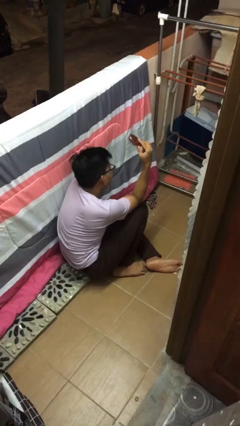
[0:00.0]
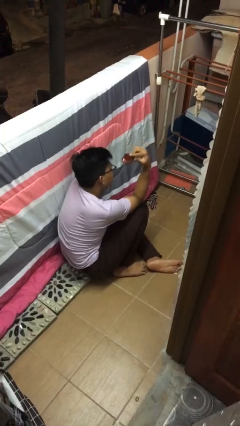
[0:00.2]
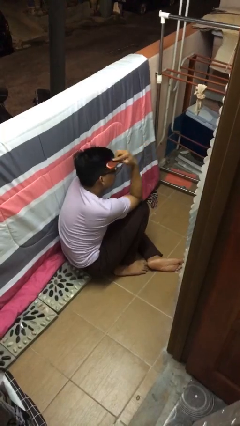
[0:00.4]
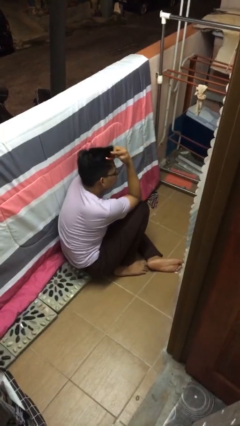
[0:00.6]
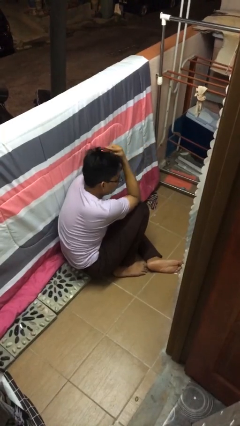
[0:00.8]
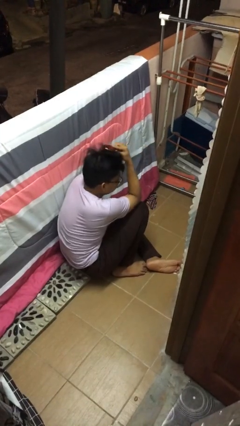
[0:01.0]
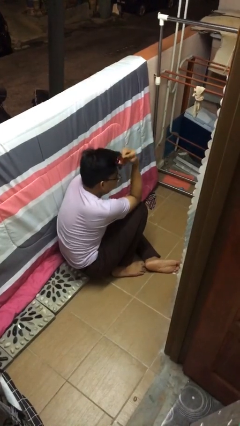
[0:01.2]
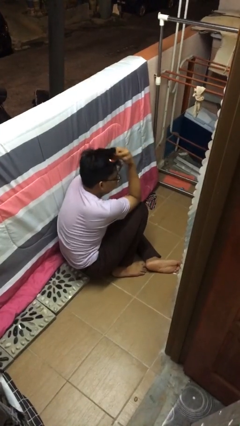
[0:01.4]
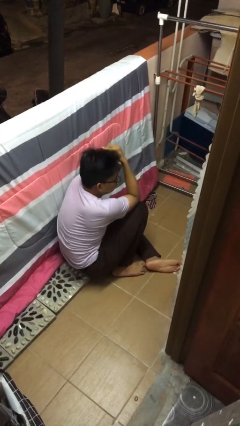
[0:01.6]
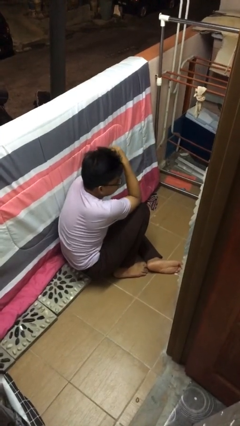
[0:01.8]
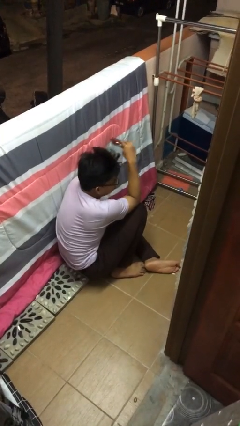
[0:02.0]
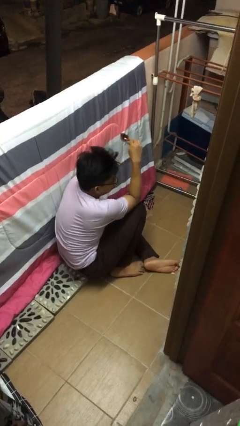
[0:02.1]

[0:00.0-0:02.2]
person brushes hair

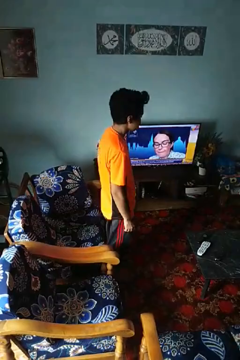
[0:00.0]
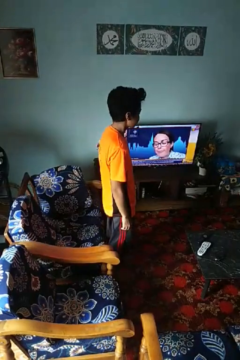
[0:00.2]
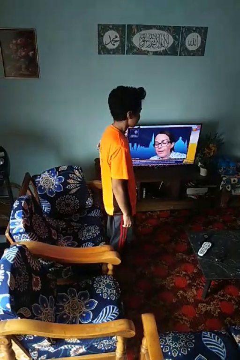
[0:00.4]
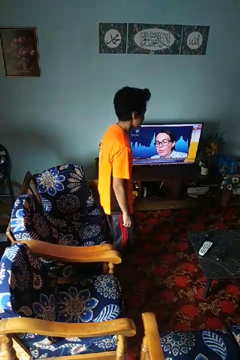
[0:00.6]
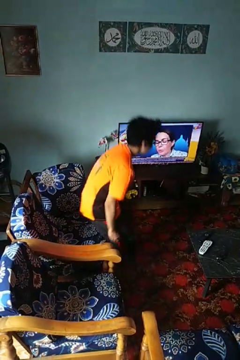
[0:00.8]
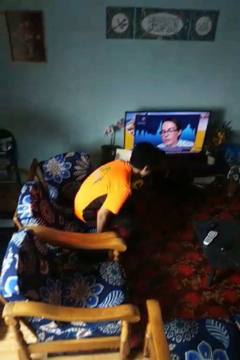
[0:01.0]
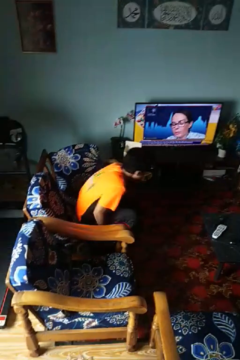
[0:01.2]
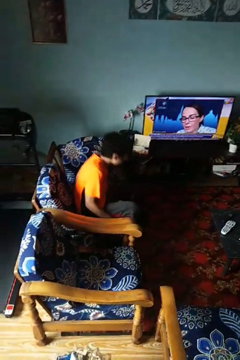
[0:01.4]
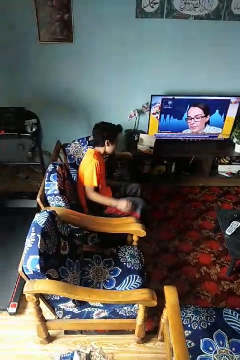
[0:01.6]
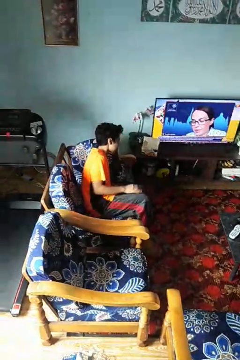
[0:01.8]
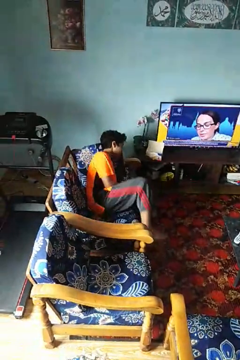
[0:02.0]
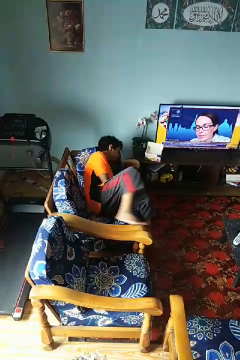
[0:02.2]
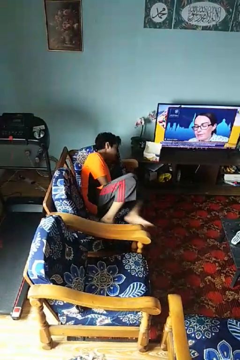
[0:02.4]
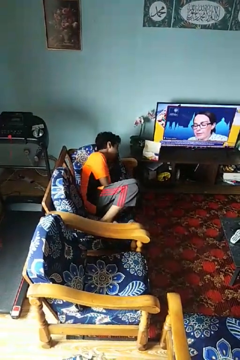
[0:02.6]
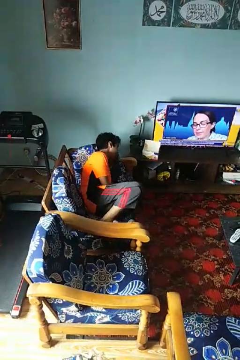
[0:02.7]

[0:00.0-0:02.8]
person lies down on couch

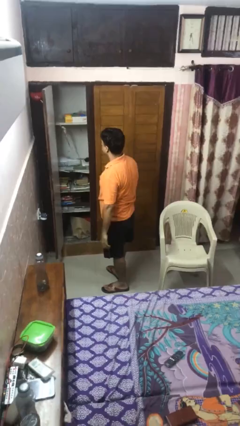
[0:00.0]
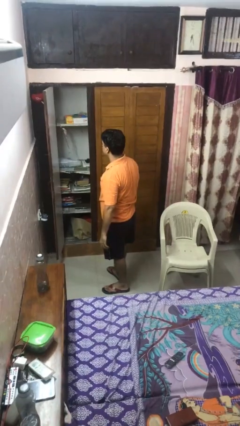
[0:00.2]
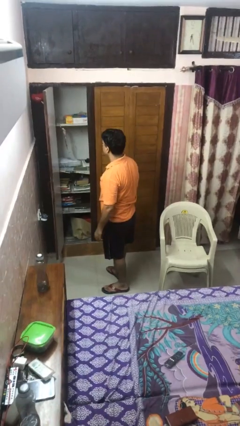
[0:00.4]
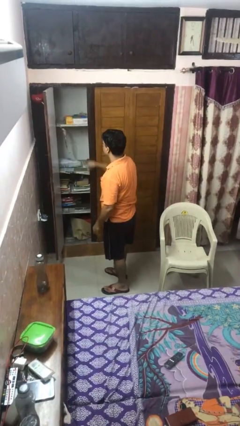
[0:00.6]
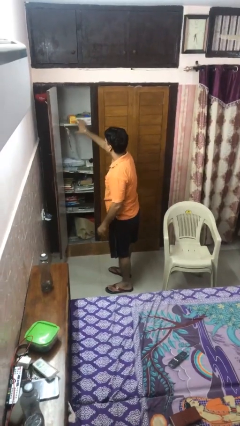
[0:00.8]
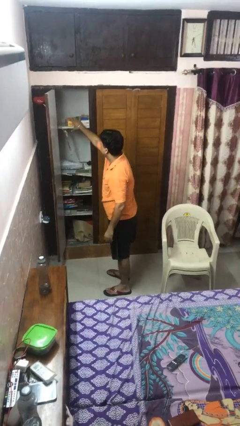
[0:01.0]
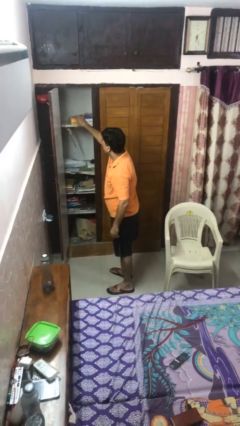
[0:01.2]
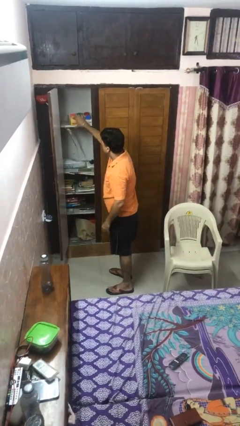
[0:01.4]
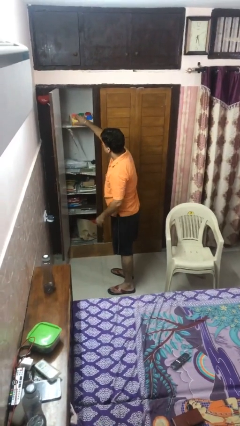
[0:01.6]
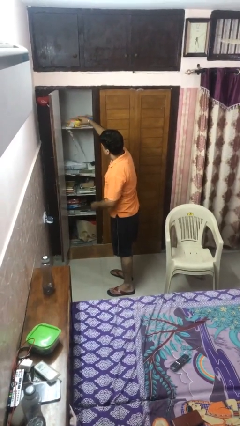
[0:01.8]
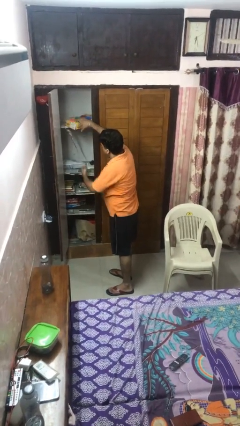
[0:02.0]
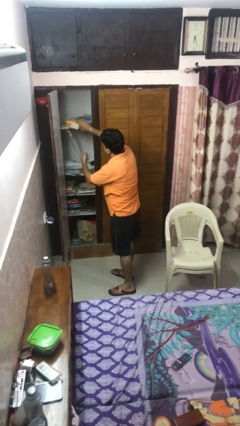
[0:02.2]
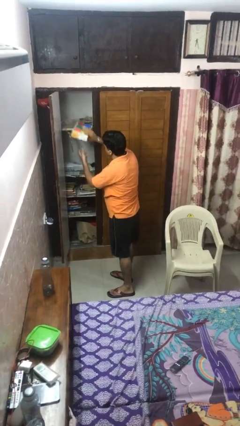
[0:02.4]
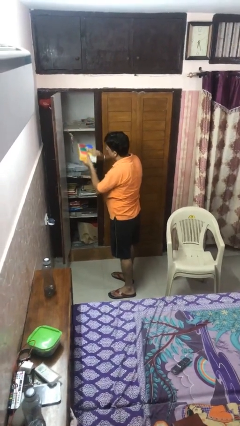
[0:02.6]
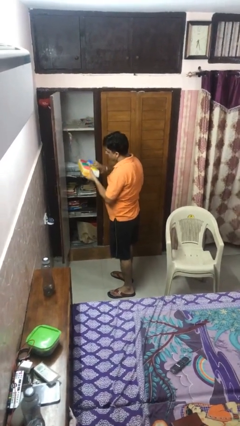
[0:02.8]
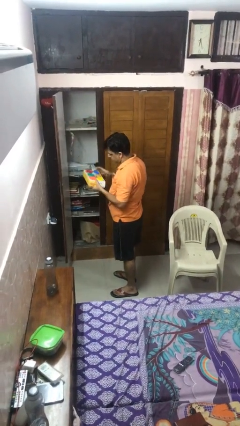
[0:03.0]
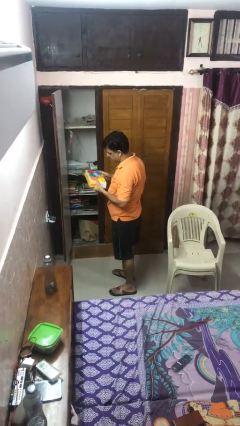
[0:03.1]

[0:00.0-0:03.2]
person picks up object from shelf

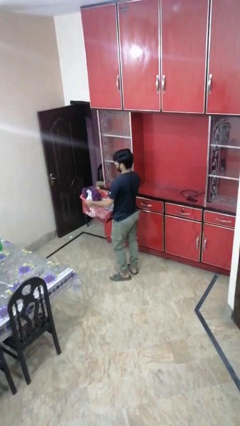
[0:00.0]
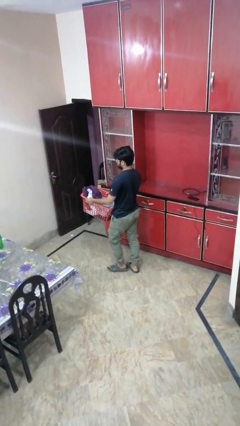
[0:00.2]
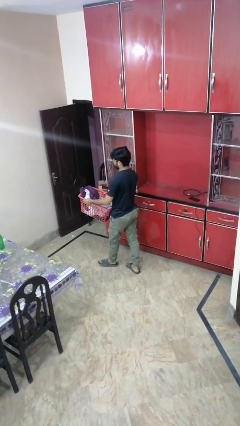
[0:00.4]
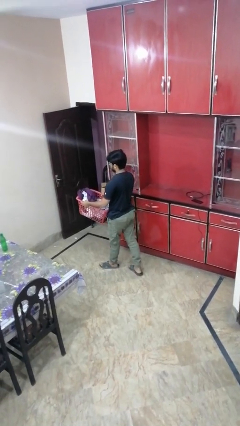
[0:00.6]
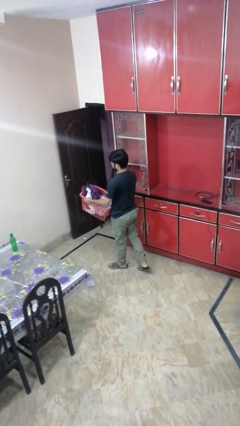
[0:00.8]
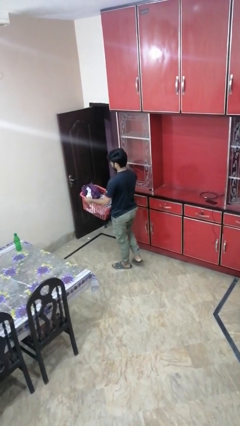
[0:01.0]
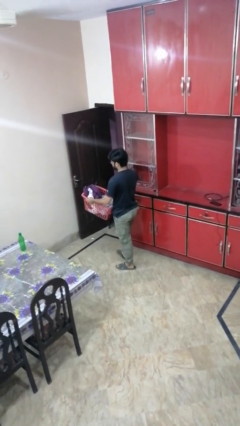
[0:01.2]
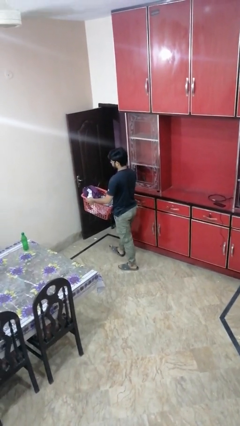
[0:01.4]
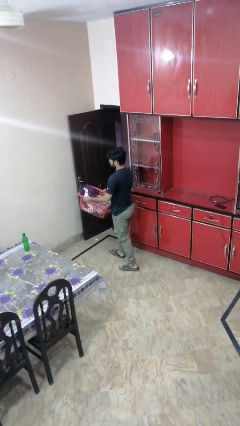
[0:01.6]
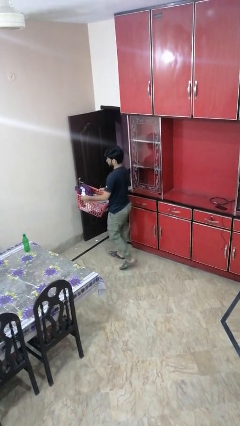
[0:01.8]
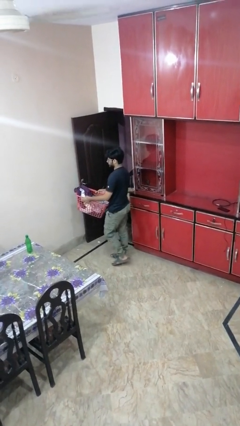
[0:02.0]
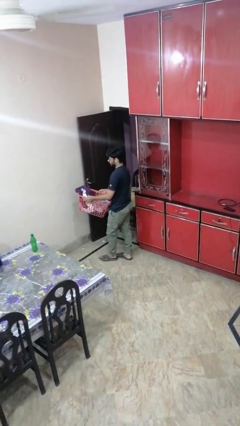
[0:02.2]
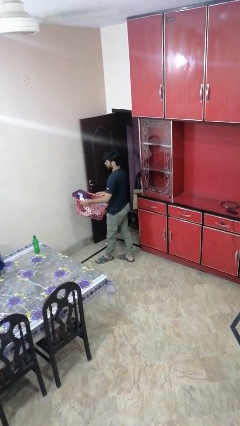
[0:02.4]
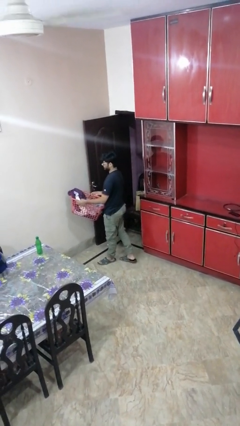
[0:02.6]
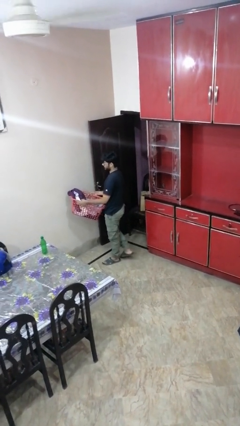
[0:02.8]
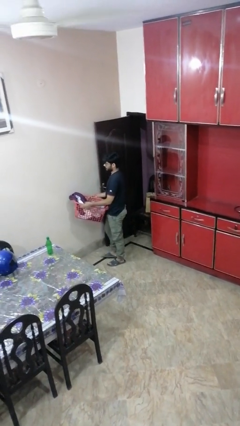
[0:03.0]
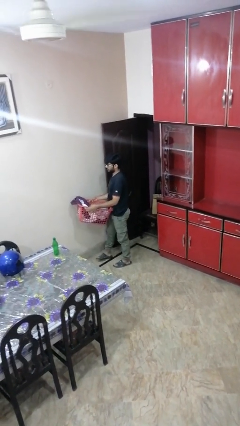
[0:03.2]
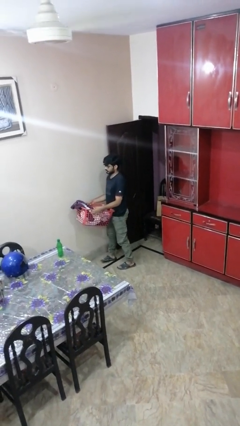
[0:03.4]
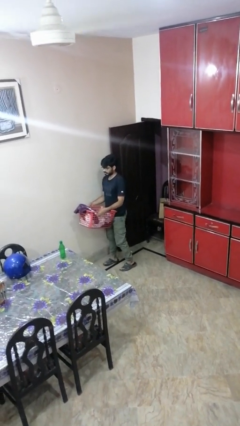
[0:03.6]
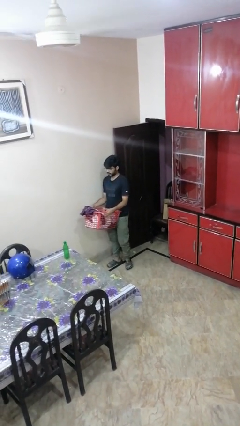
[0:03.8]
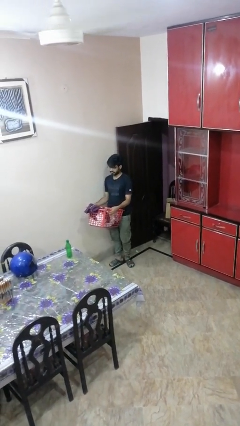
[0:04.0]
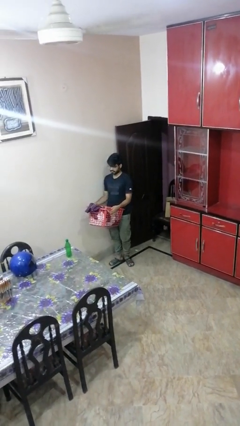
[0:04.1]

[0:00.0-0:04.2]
person carries laundry basket

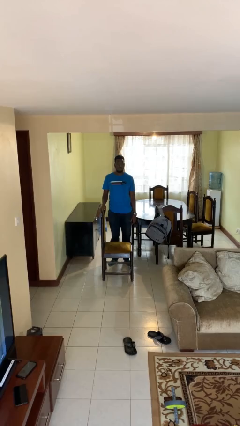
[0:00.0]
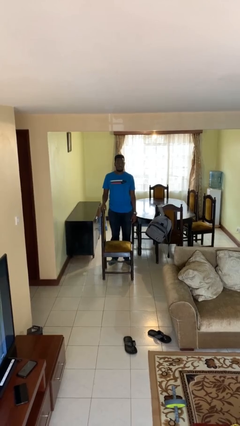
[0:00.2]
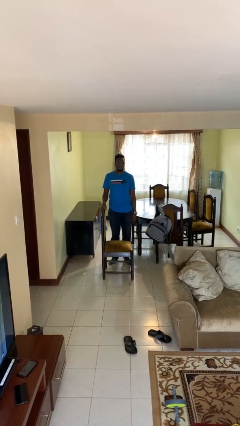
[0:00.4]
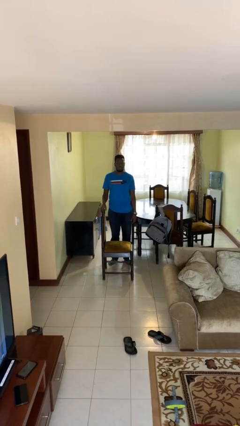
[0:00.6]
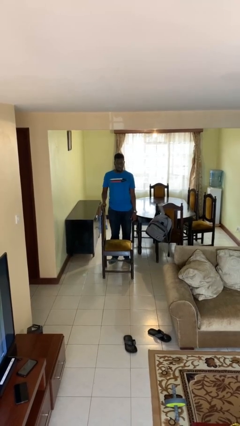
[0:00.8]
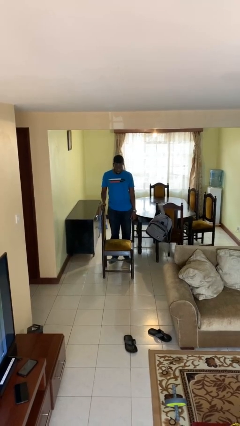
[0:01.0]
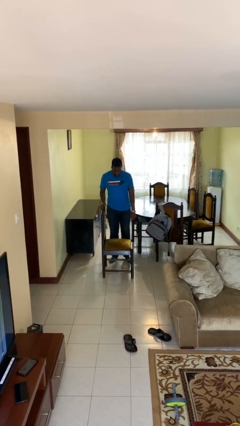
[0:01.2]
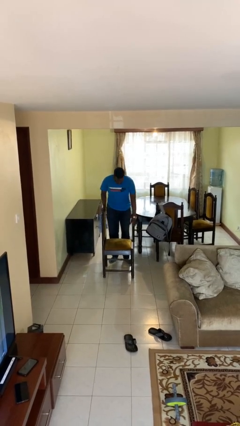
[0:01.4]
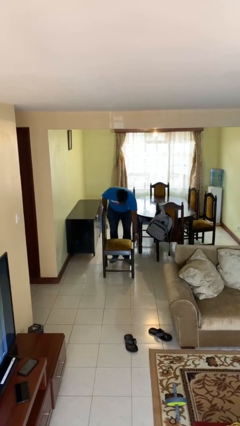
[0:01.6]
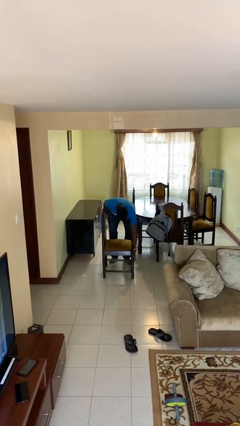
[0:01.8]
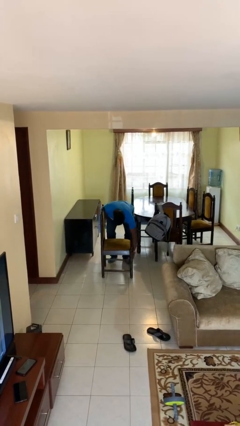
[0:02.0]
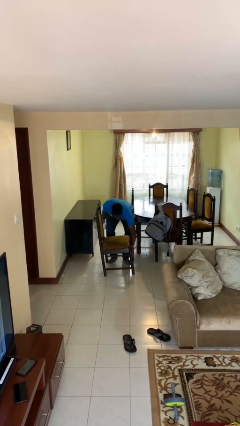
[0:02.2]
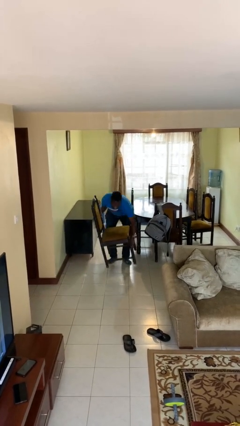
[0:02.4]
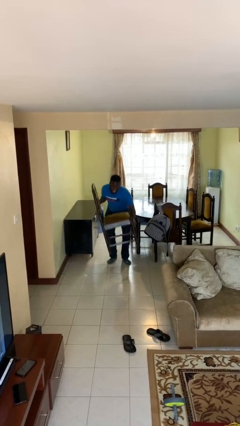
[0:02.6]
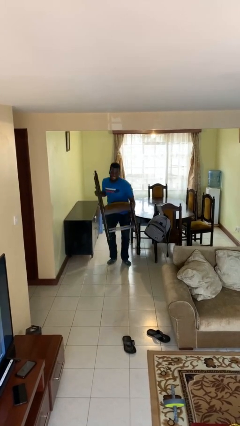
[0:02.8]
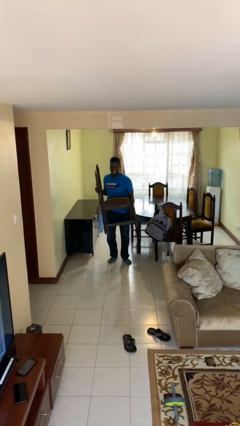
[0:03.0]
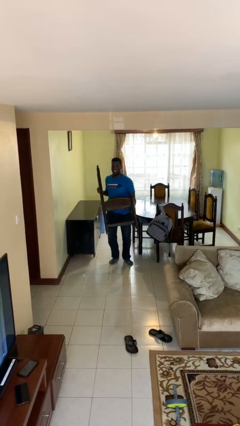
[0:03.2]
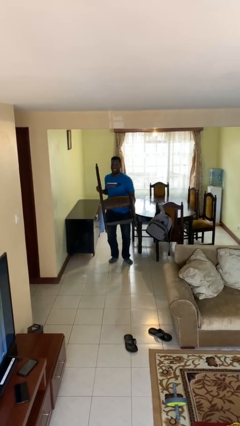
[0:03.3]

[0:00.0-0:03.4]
person picks up object from floor

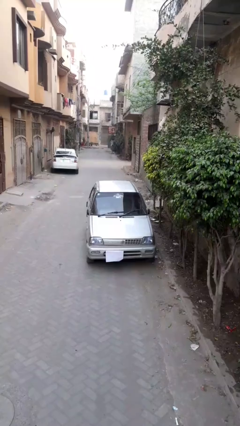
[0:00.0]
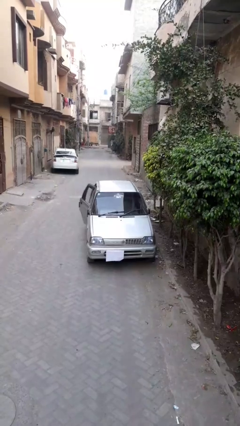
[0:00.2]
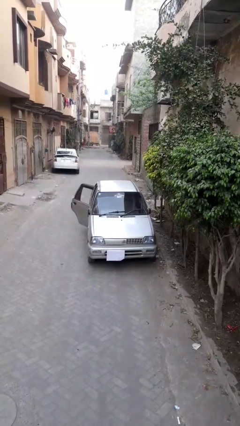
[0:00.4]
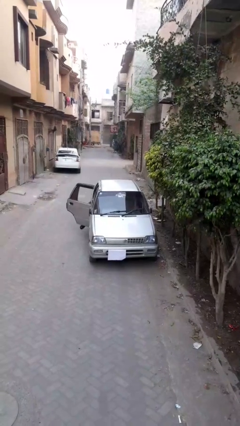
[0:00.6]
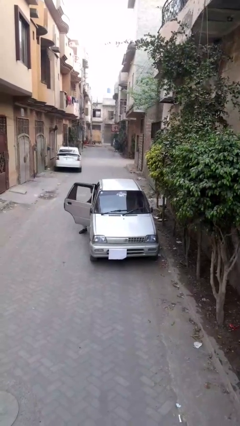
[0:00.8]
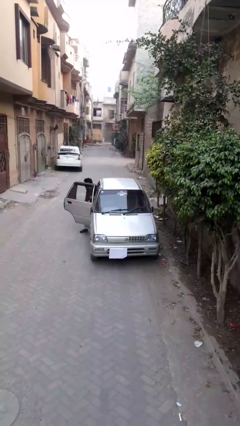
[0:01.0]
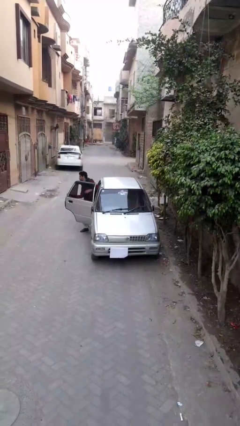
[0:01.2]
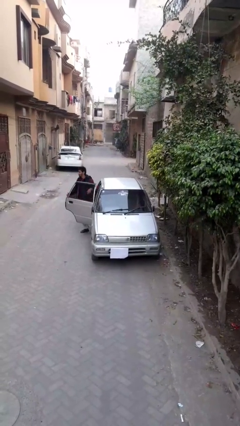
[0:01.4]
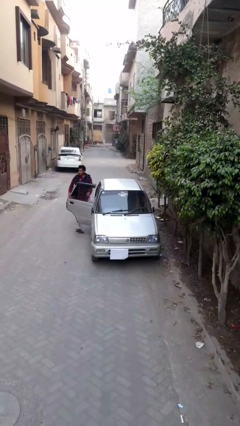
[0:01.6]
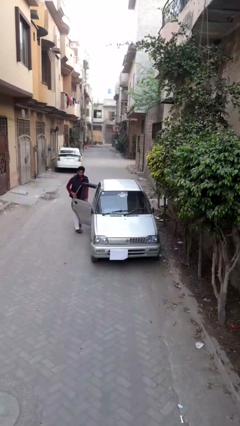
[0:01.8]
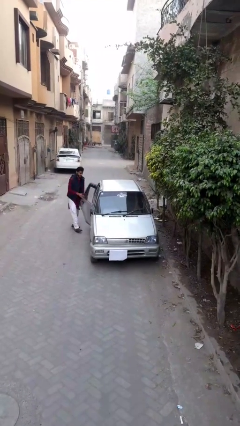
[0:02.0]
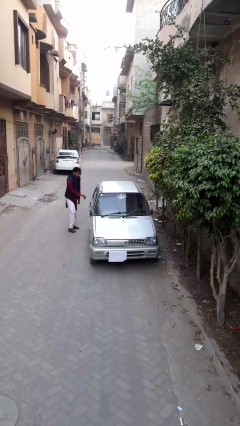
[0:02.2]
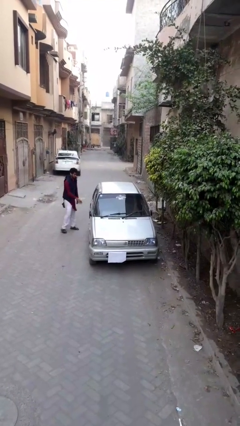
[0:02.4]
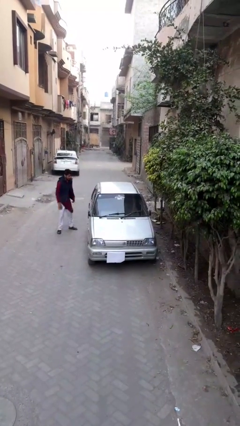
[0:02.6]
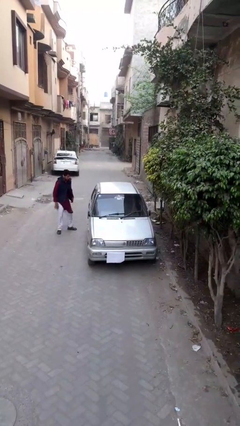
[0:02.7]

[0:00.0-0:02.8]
car drops off person
